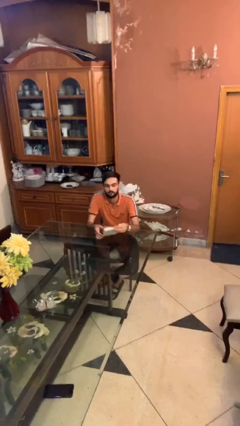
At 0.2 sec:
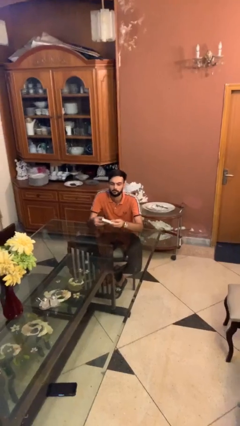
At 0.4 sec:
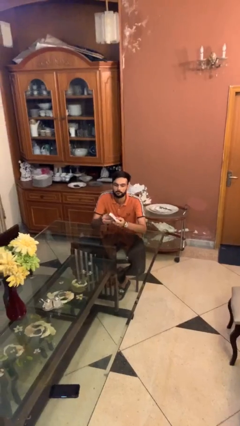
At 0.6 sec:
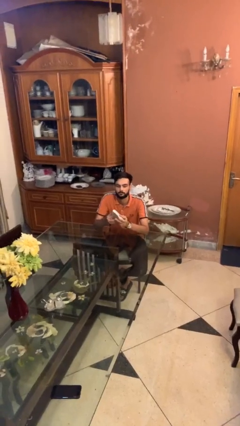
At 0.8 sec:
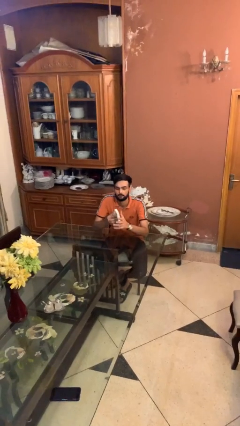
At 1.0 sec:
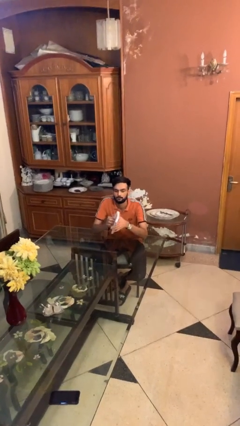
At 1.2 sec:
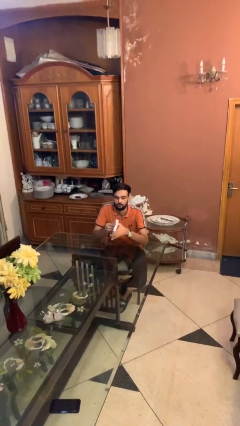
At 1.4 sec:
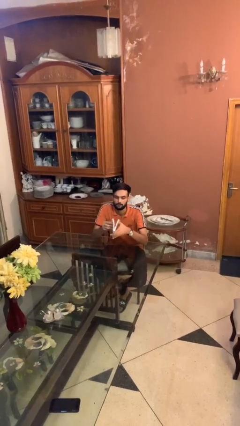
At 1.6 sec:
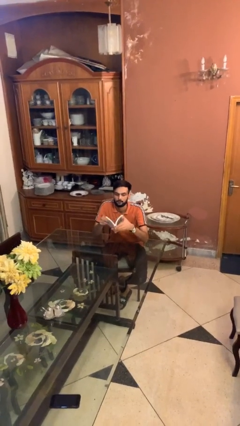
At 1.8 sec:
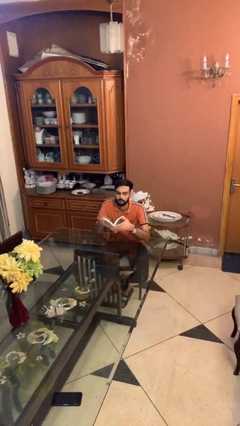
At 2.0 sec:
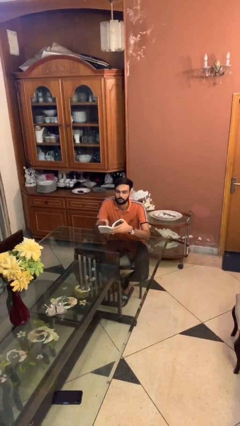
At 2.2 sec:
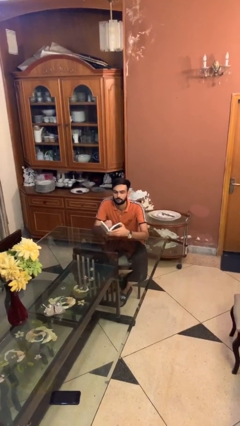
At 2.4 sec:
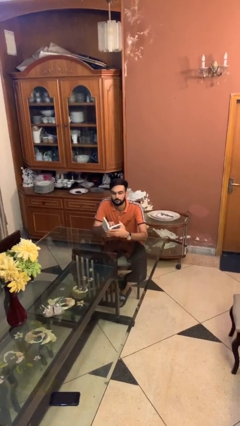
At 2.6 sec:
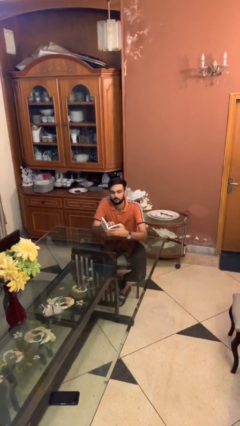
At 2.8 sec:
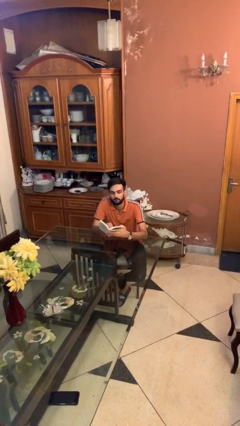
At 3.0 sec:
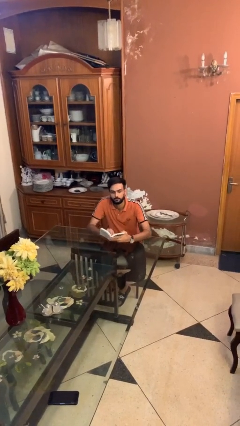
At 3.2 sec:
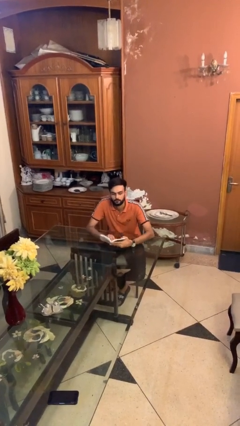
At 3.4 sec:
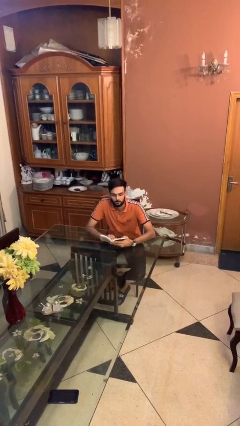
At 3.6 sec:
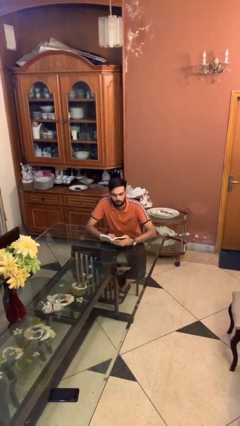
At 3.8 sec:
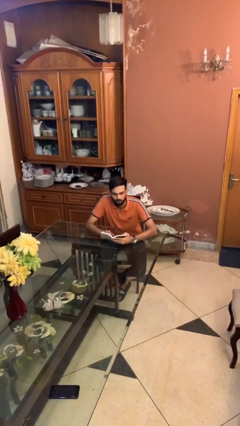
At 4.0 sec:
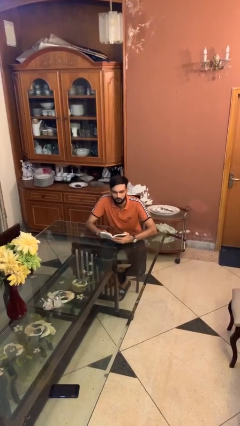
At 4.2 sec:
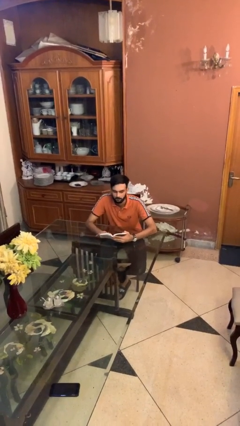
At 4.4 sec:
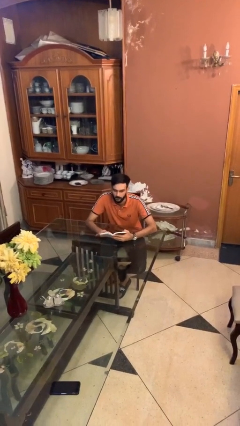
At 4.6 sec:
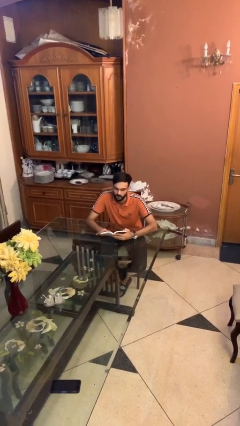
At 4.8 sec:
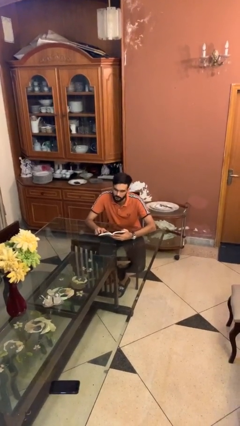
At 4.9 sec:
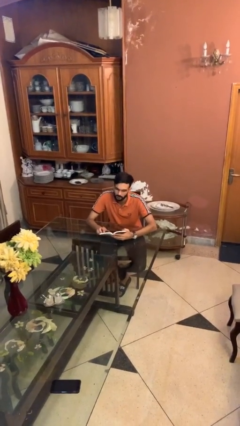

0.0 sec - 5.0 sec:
person reads document

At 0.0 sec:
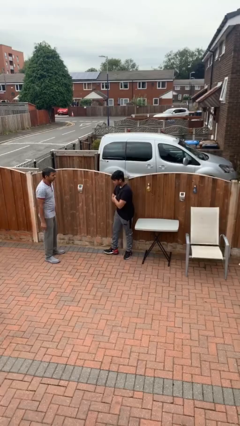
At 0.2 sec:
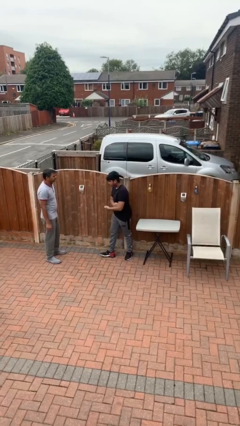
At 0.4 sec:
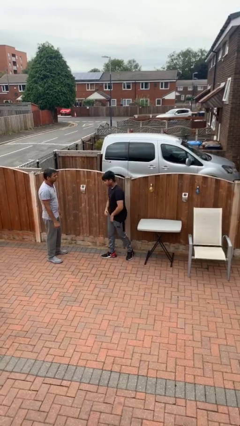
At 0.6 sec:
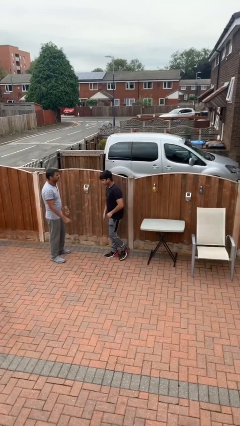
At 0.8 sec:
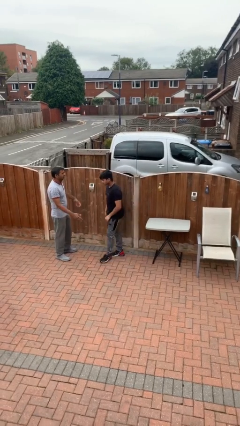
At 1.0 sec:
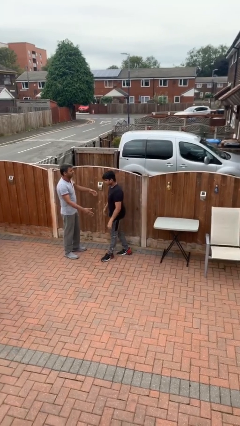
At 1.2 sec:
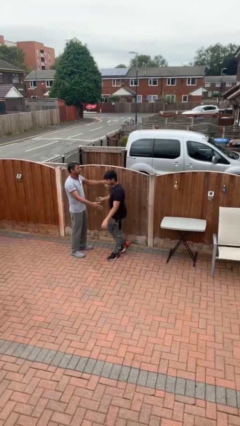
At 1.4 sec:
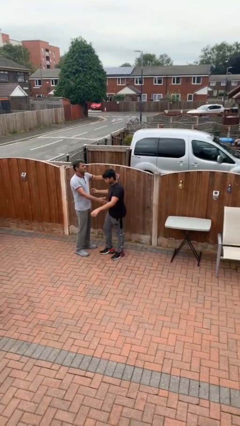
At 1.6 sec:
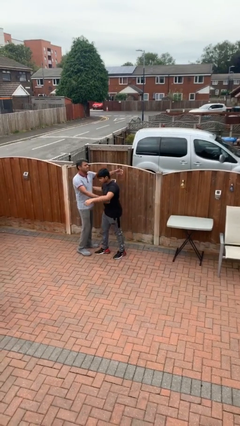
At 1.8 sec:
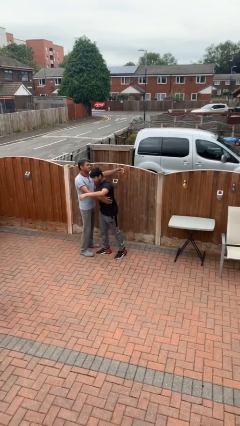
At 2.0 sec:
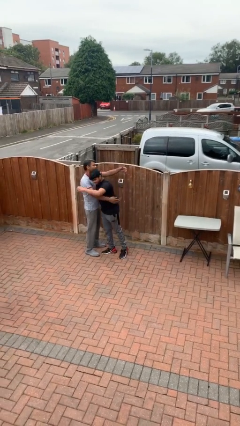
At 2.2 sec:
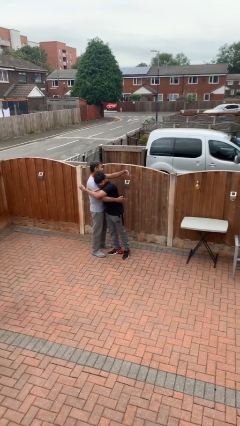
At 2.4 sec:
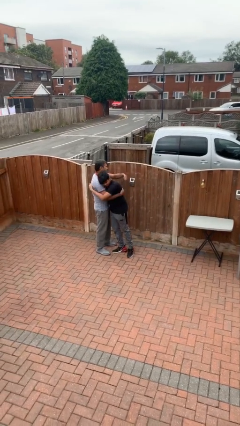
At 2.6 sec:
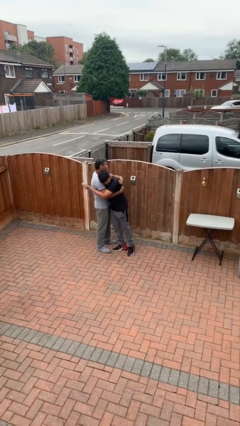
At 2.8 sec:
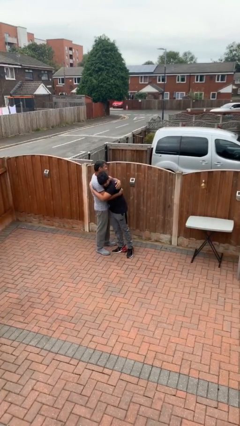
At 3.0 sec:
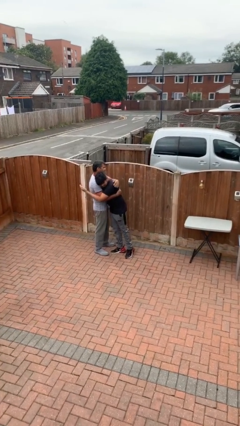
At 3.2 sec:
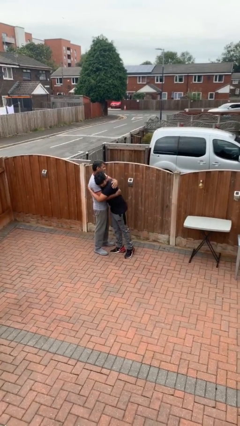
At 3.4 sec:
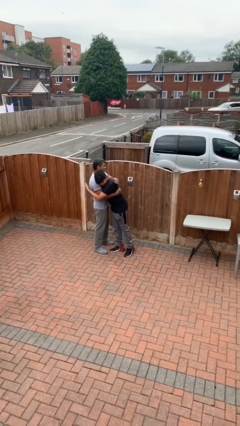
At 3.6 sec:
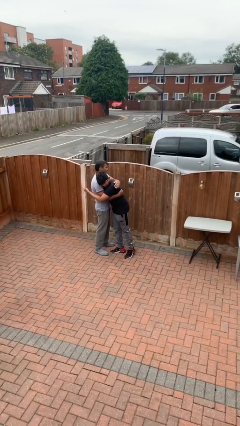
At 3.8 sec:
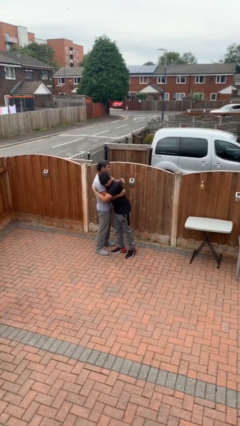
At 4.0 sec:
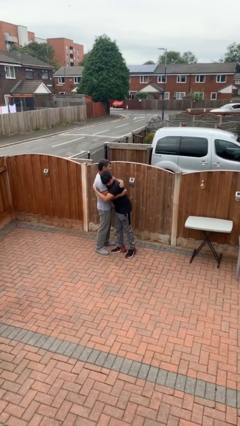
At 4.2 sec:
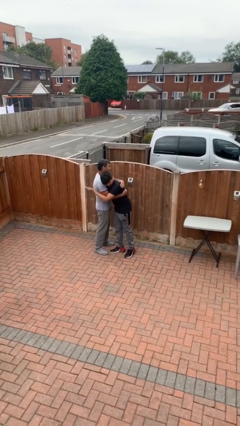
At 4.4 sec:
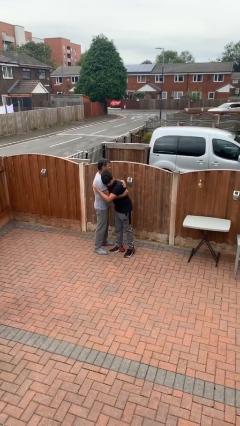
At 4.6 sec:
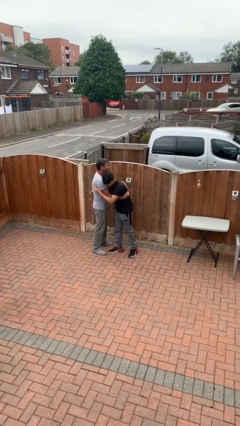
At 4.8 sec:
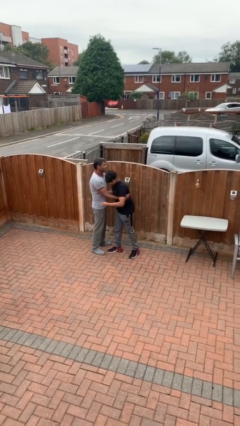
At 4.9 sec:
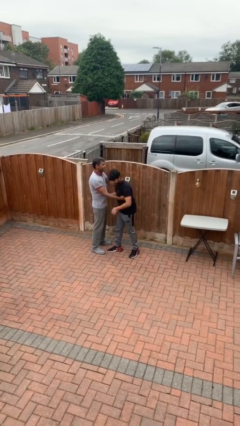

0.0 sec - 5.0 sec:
person embraces person

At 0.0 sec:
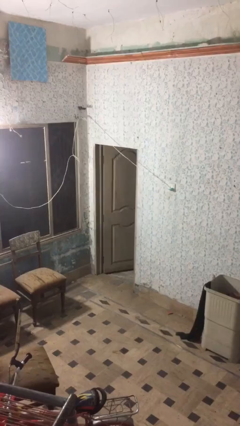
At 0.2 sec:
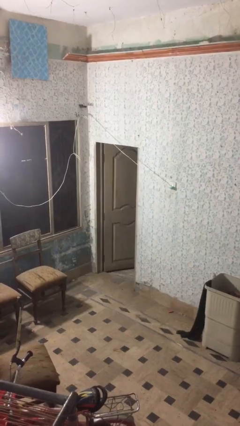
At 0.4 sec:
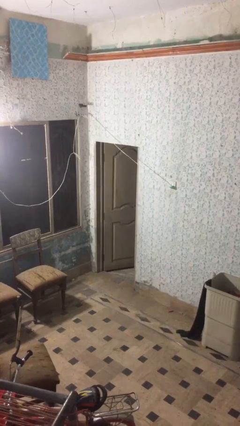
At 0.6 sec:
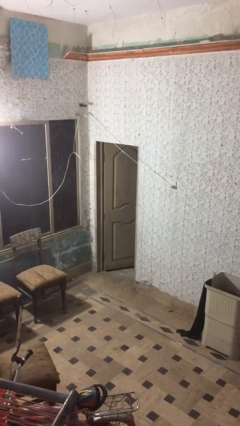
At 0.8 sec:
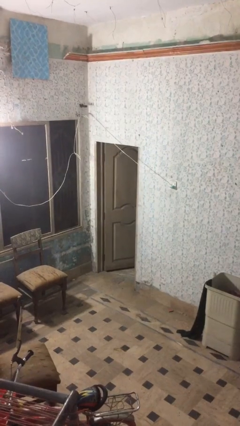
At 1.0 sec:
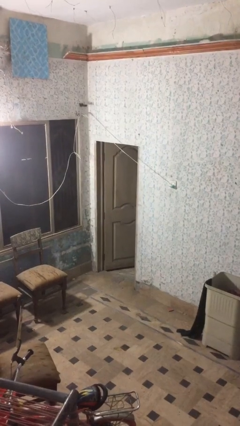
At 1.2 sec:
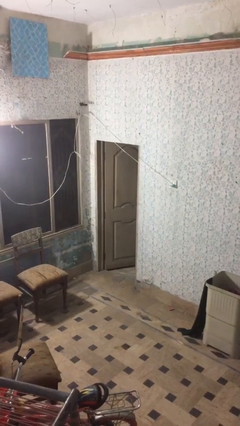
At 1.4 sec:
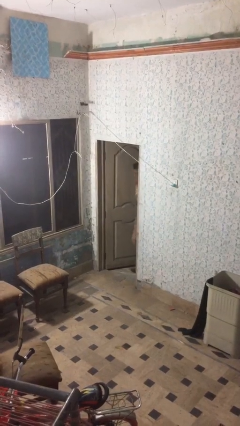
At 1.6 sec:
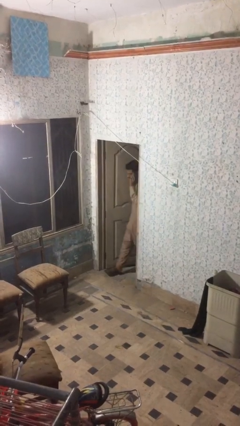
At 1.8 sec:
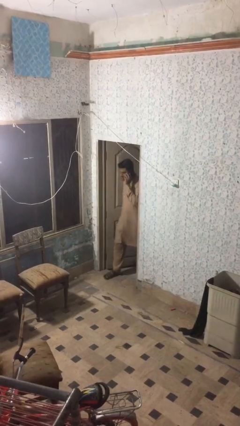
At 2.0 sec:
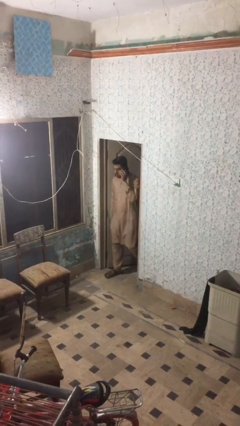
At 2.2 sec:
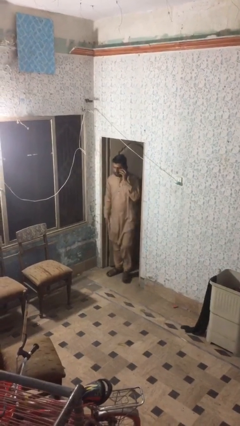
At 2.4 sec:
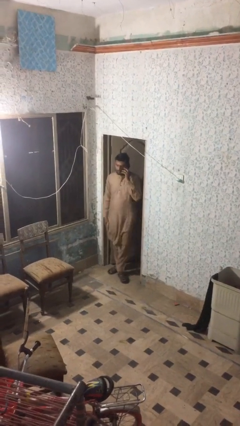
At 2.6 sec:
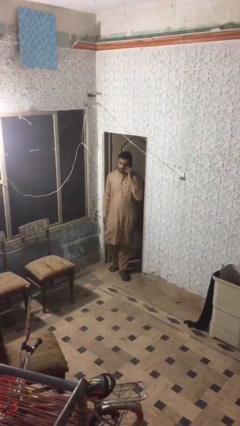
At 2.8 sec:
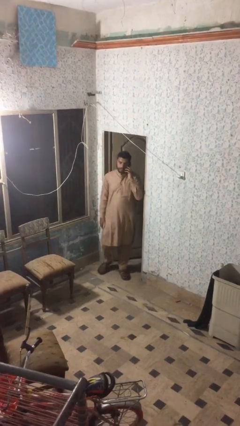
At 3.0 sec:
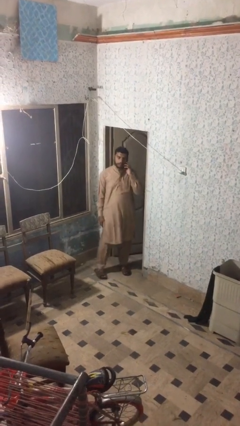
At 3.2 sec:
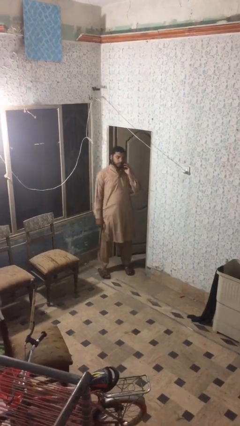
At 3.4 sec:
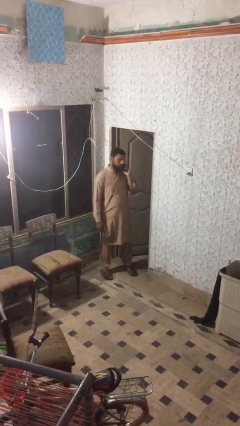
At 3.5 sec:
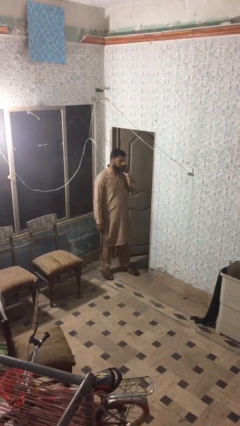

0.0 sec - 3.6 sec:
person enters scene through structure

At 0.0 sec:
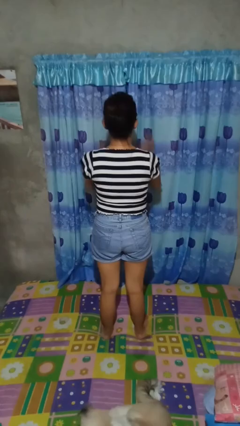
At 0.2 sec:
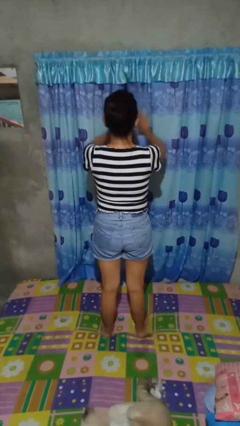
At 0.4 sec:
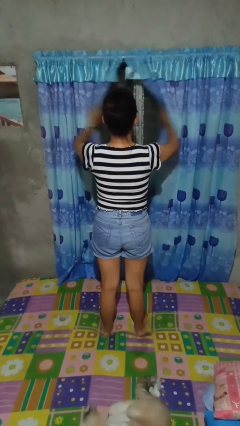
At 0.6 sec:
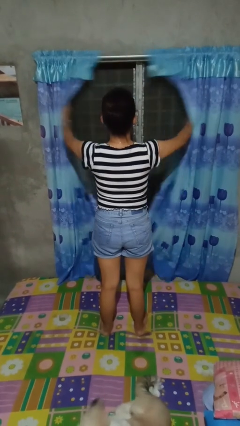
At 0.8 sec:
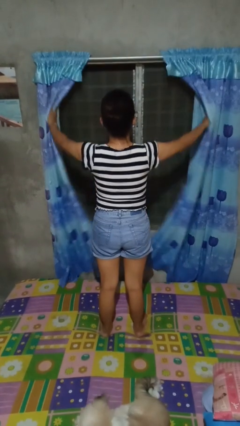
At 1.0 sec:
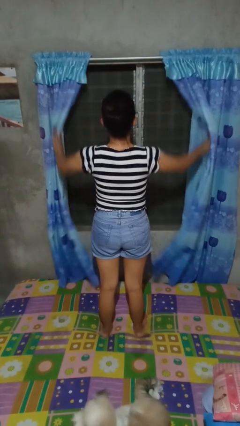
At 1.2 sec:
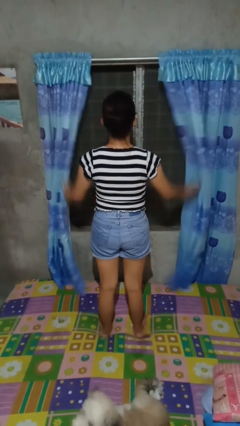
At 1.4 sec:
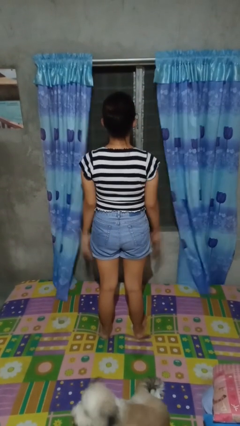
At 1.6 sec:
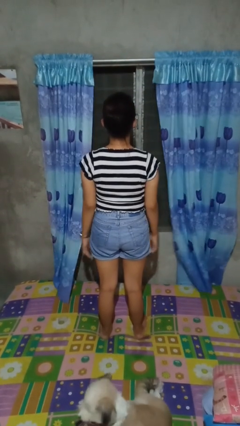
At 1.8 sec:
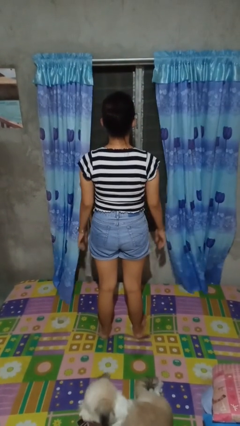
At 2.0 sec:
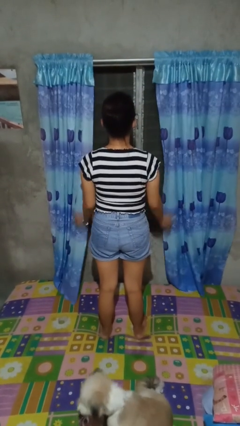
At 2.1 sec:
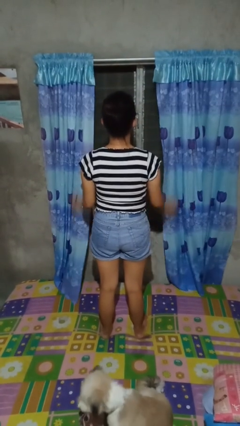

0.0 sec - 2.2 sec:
person opens curtains

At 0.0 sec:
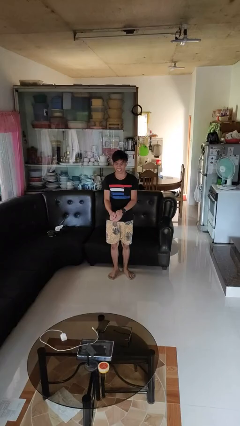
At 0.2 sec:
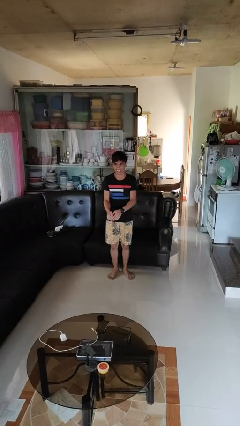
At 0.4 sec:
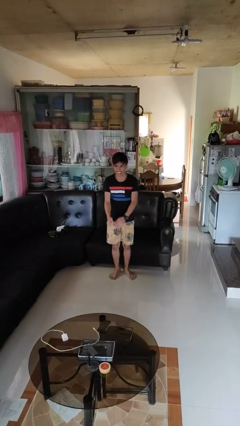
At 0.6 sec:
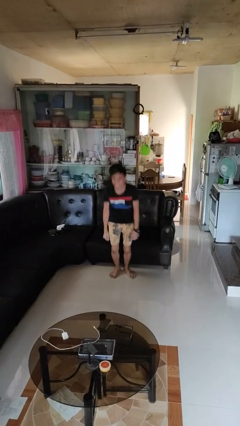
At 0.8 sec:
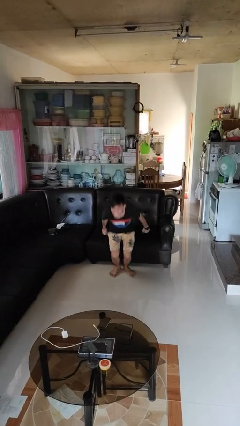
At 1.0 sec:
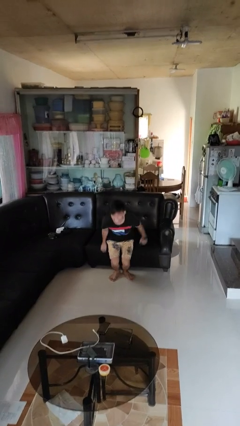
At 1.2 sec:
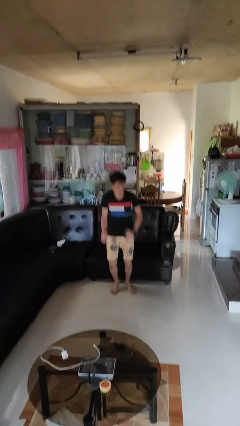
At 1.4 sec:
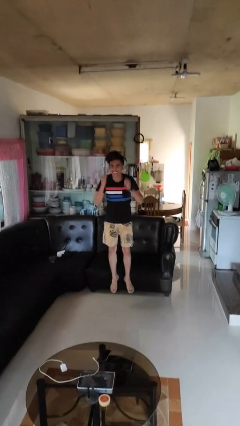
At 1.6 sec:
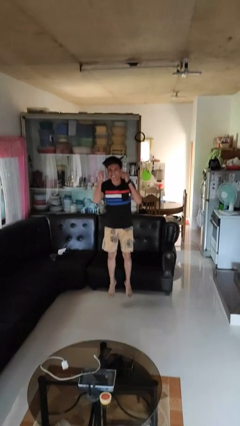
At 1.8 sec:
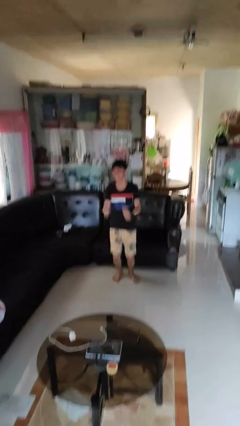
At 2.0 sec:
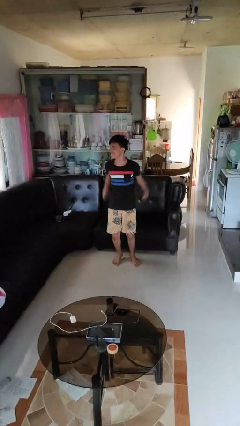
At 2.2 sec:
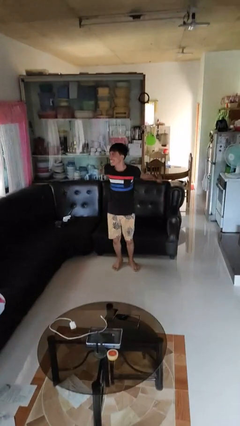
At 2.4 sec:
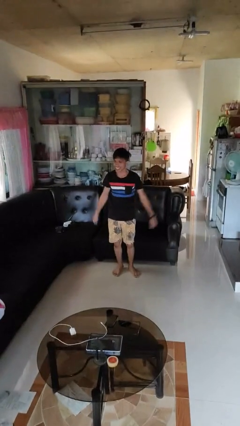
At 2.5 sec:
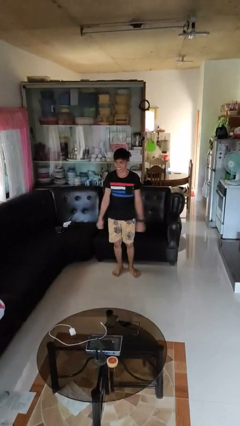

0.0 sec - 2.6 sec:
person jumps
